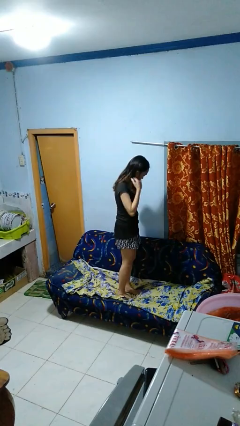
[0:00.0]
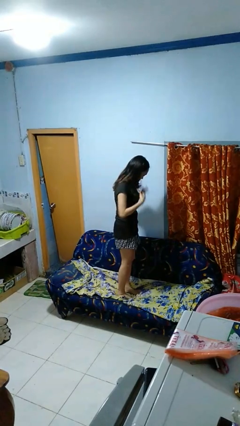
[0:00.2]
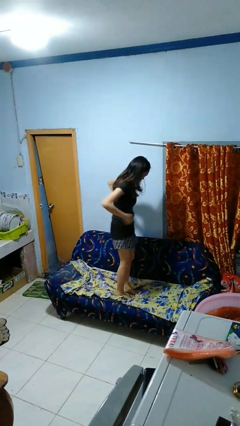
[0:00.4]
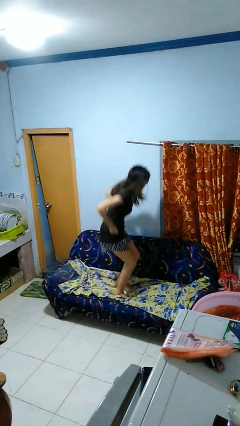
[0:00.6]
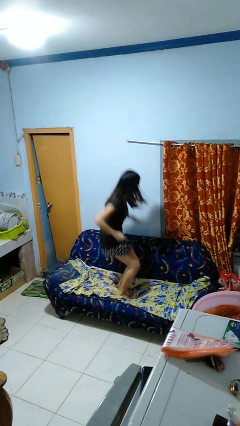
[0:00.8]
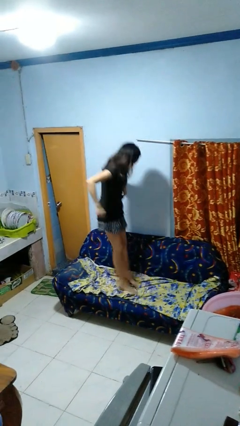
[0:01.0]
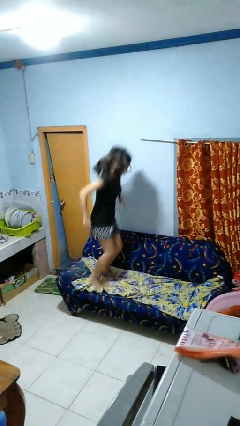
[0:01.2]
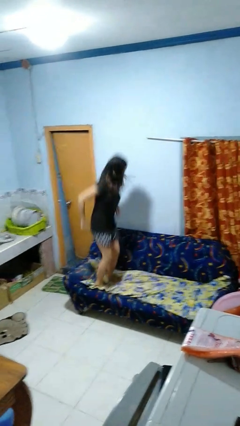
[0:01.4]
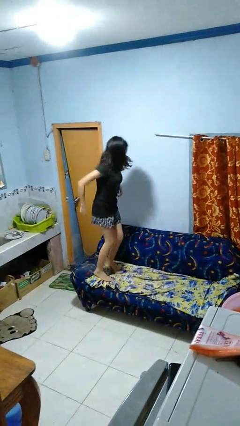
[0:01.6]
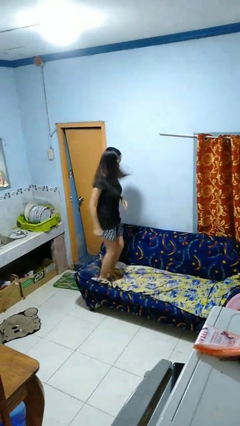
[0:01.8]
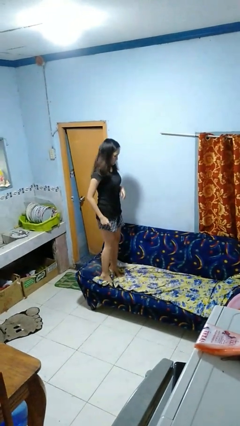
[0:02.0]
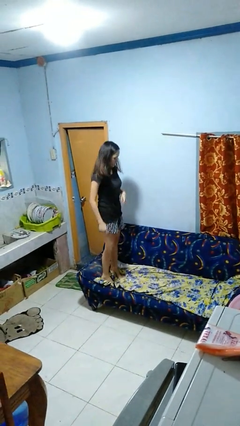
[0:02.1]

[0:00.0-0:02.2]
person jumps on couch

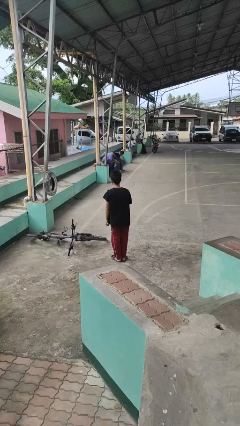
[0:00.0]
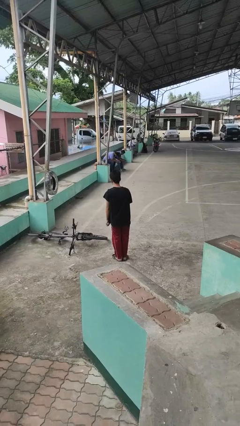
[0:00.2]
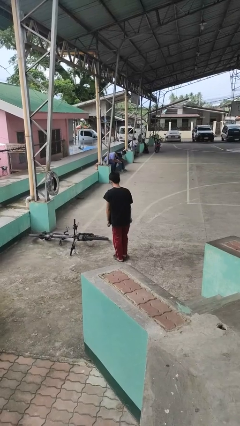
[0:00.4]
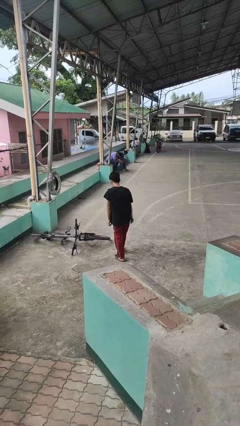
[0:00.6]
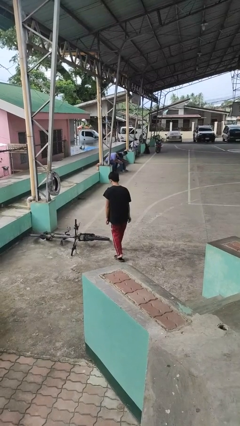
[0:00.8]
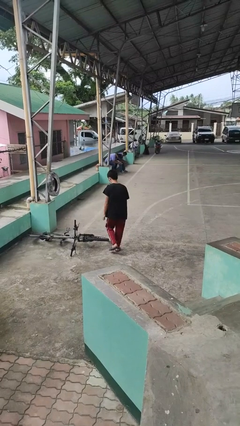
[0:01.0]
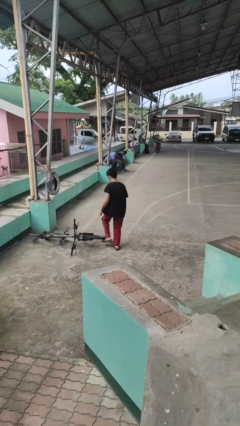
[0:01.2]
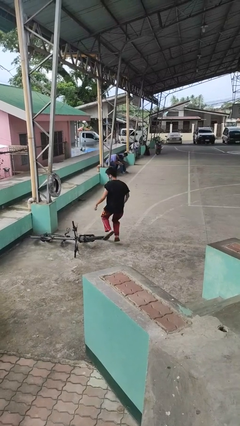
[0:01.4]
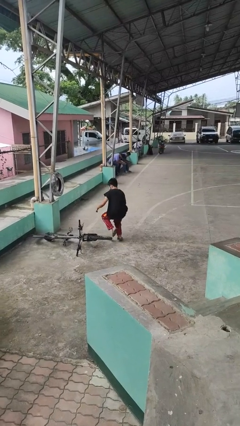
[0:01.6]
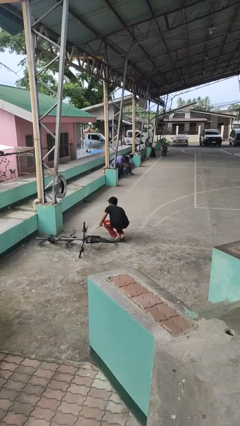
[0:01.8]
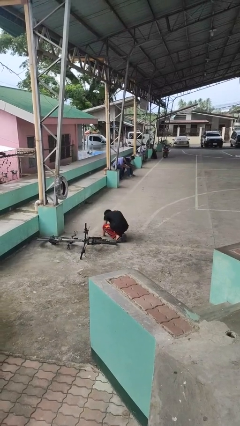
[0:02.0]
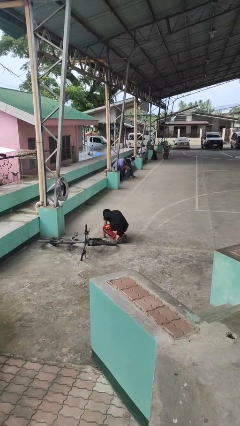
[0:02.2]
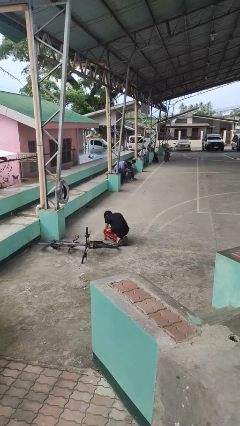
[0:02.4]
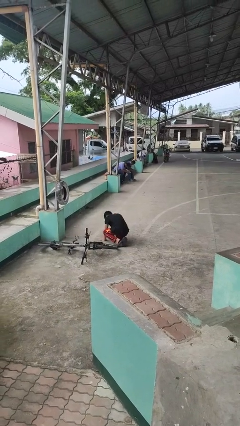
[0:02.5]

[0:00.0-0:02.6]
person trips on object on floor

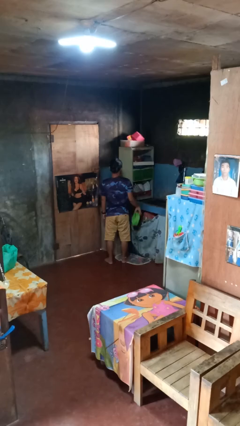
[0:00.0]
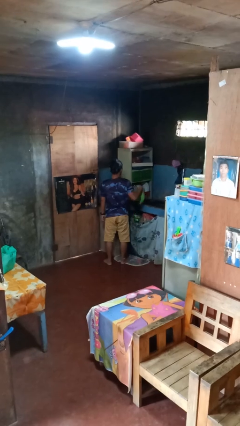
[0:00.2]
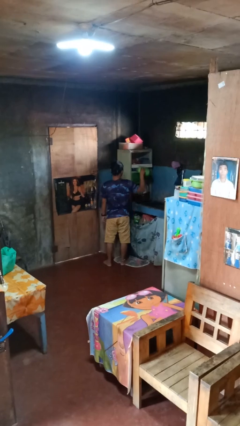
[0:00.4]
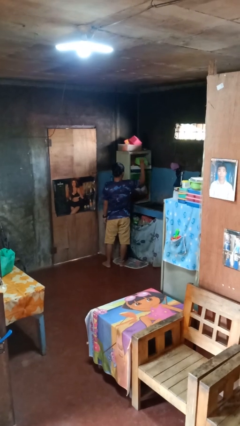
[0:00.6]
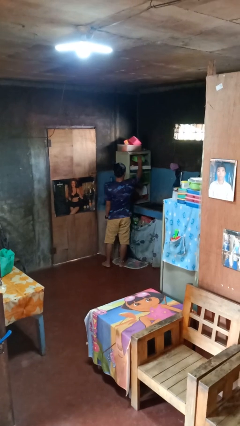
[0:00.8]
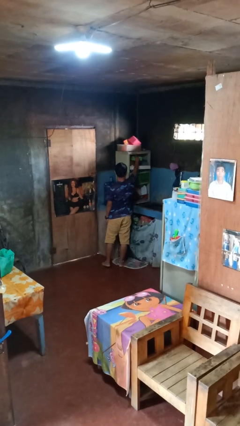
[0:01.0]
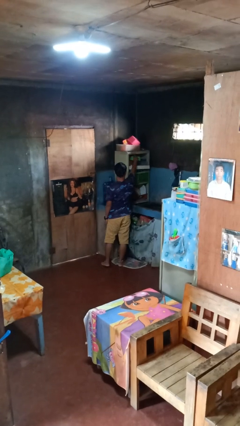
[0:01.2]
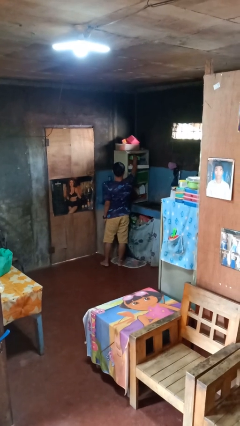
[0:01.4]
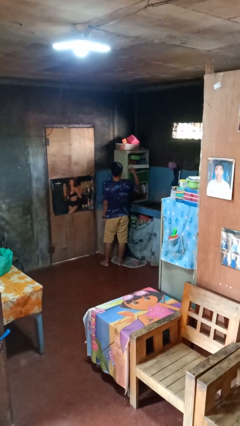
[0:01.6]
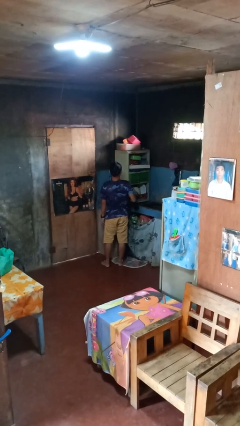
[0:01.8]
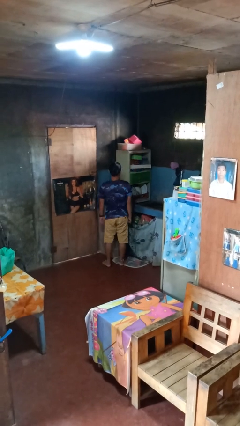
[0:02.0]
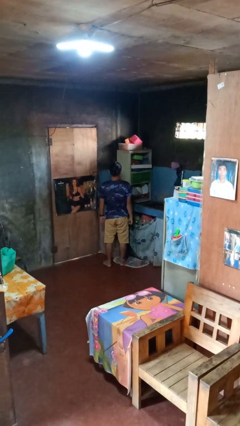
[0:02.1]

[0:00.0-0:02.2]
person puts object in cabinet

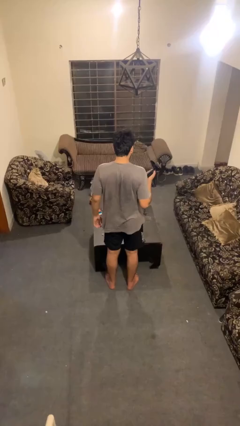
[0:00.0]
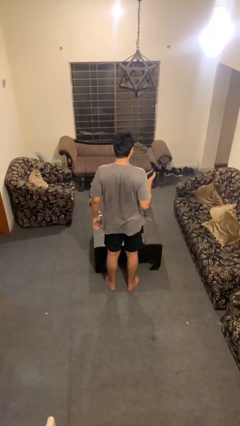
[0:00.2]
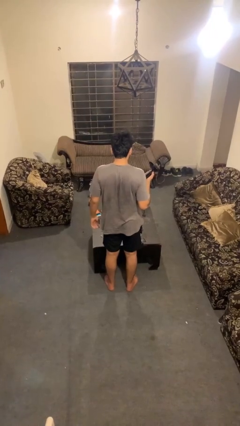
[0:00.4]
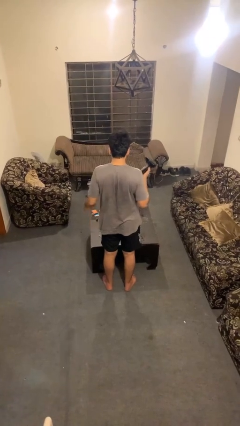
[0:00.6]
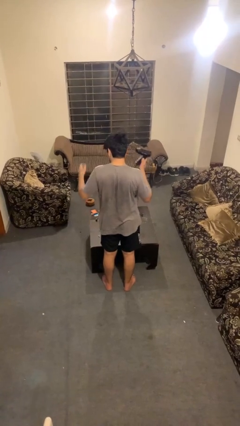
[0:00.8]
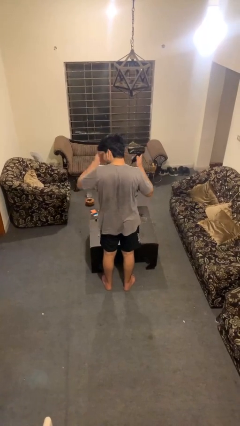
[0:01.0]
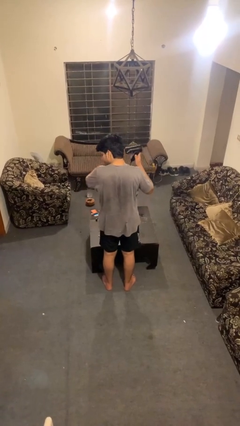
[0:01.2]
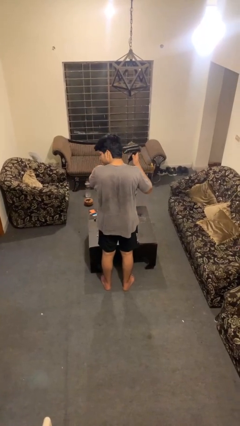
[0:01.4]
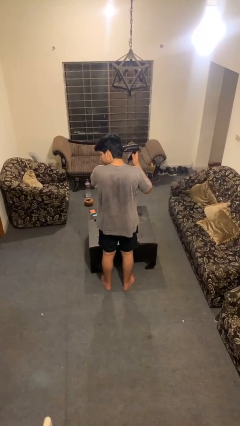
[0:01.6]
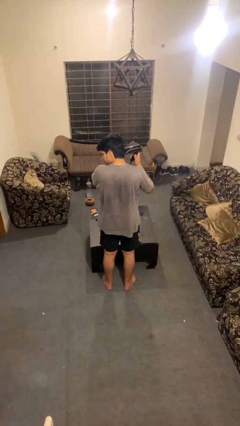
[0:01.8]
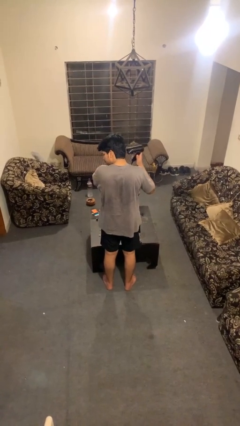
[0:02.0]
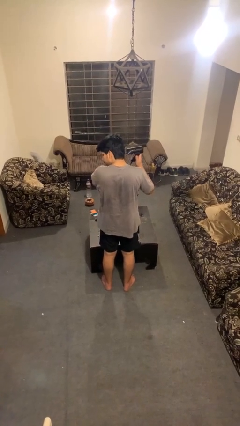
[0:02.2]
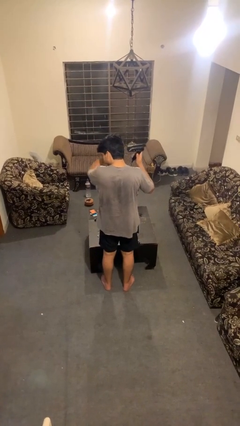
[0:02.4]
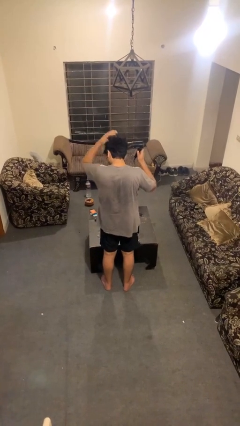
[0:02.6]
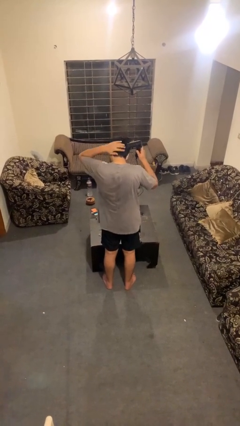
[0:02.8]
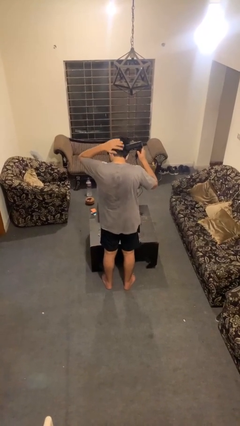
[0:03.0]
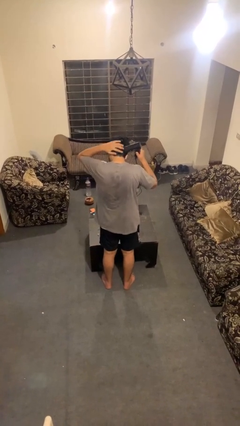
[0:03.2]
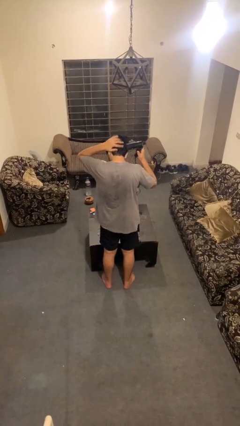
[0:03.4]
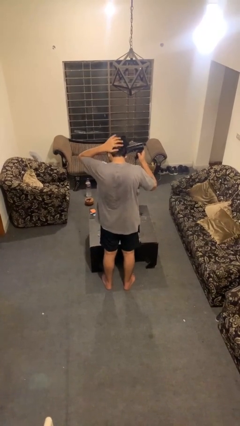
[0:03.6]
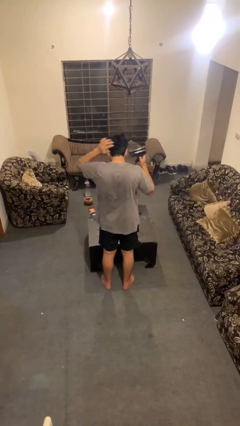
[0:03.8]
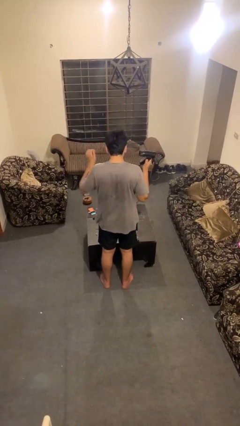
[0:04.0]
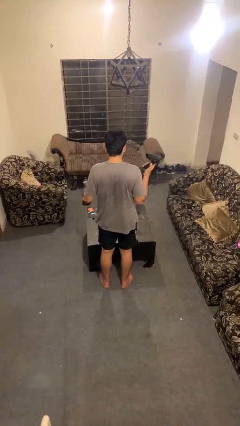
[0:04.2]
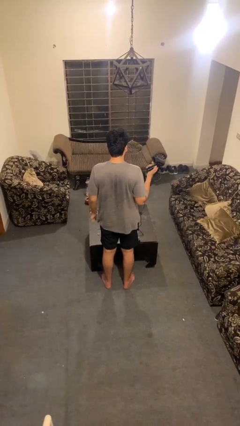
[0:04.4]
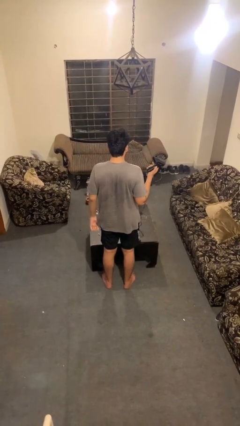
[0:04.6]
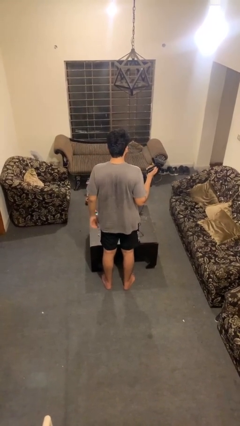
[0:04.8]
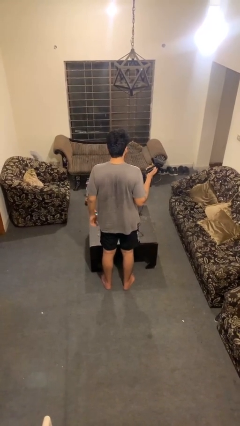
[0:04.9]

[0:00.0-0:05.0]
person dries hair with hairdryer

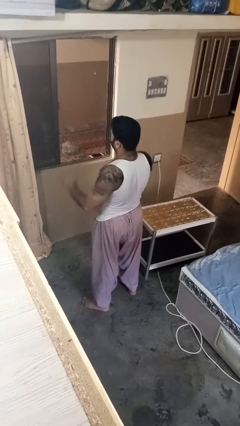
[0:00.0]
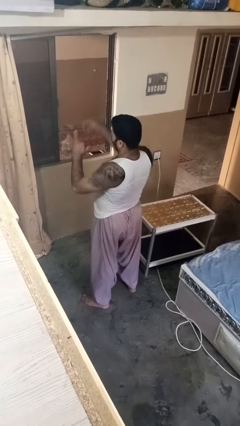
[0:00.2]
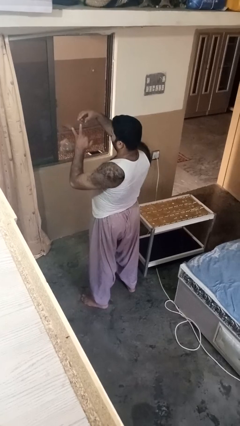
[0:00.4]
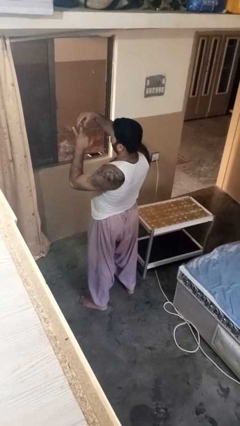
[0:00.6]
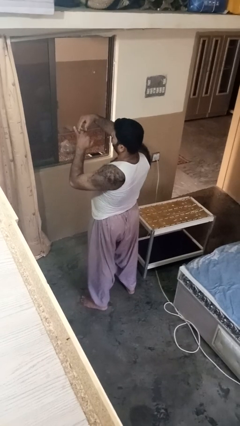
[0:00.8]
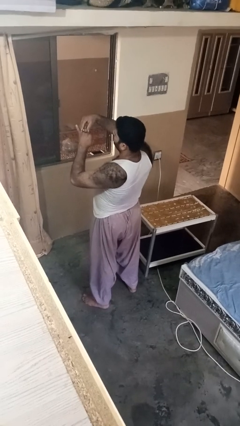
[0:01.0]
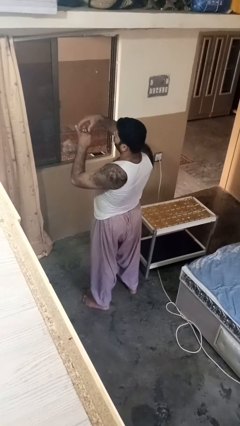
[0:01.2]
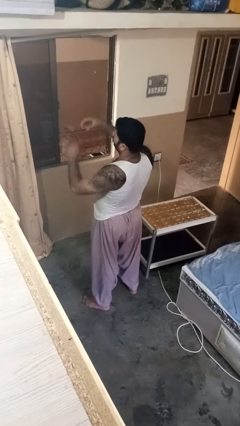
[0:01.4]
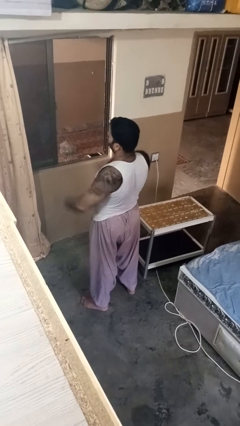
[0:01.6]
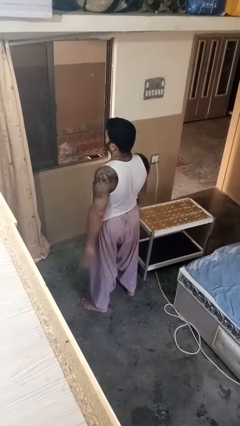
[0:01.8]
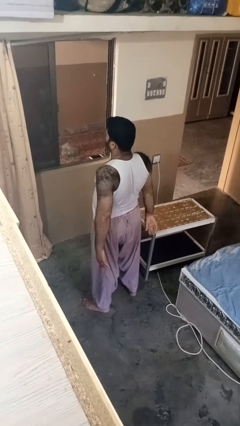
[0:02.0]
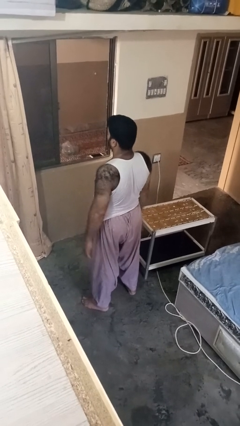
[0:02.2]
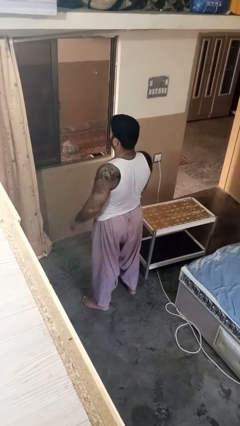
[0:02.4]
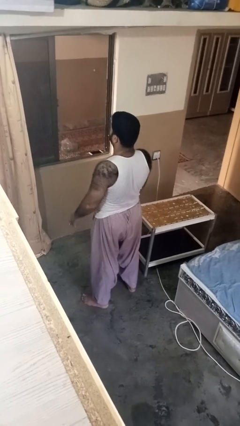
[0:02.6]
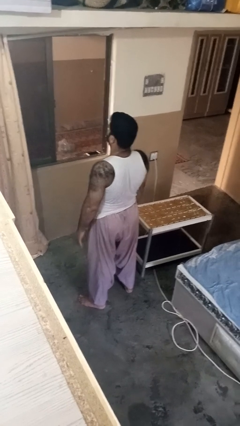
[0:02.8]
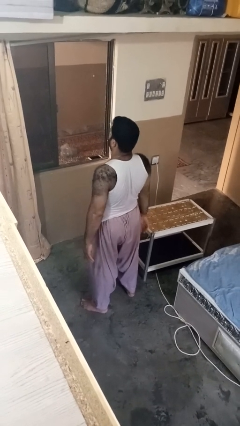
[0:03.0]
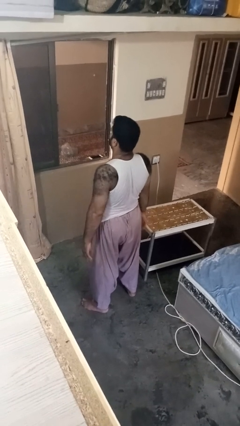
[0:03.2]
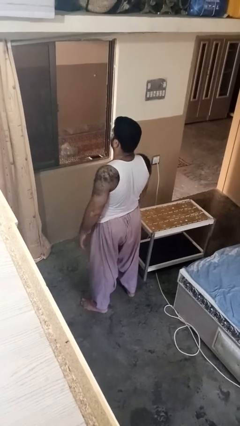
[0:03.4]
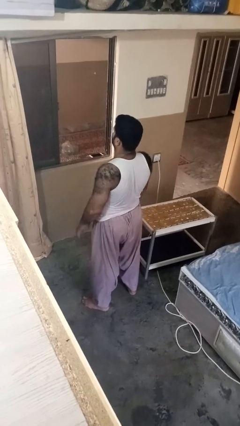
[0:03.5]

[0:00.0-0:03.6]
person puts on ring

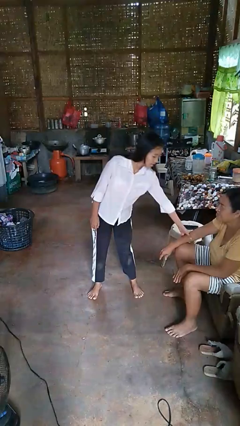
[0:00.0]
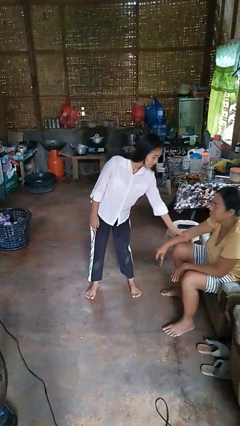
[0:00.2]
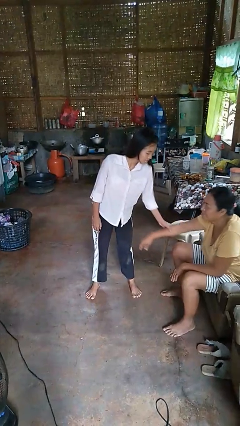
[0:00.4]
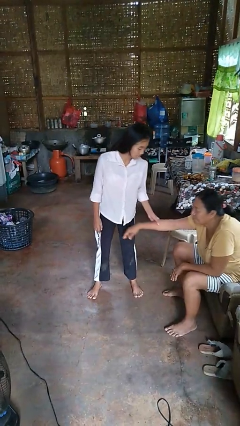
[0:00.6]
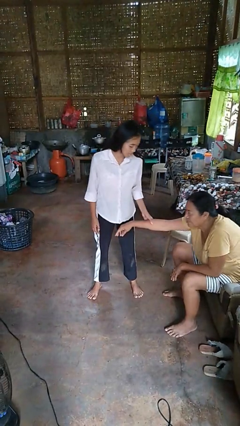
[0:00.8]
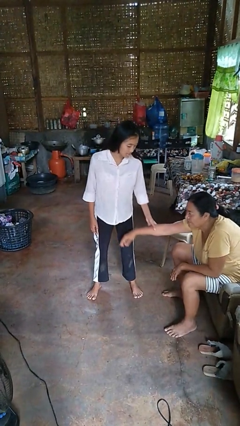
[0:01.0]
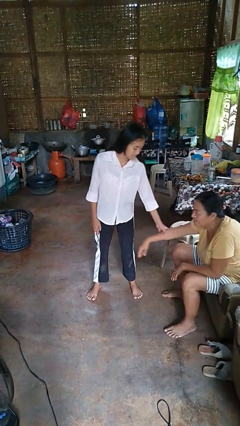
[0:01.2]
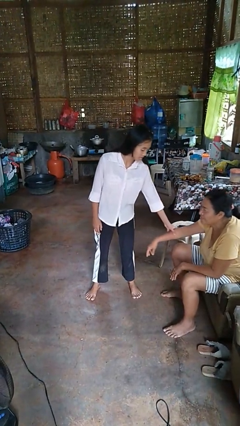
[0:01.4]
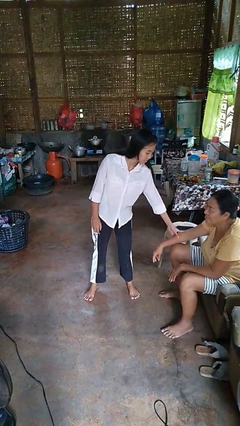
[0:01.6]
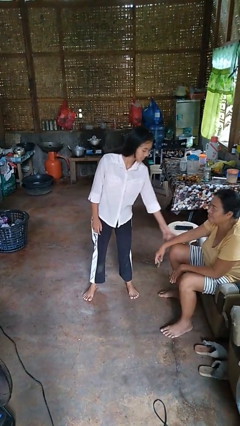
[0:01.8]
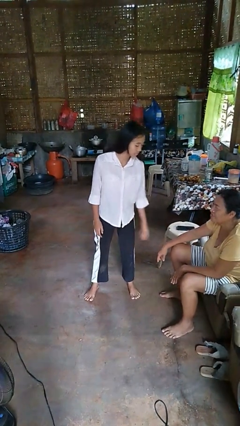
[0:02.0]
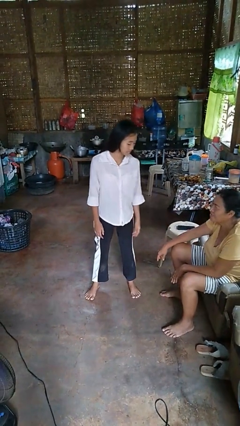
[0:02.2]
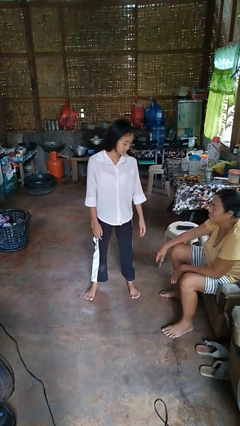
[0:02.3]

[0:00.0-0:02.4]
person grabs person by forearm
